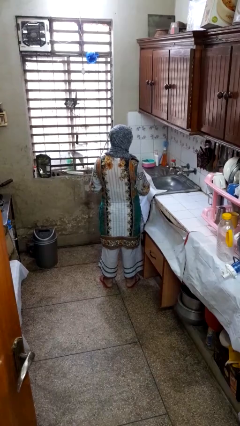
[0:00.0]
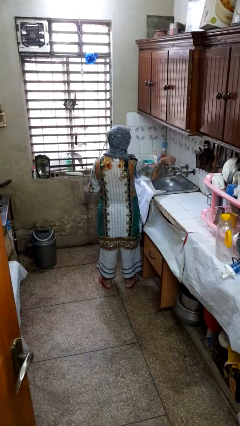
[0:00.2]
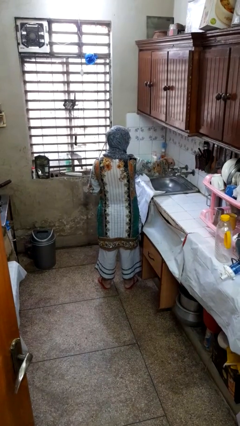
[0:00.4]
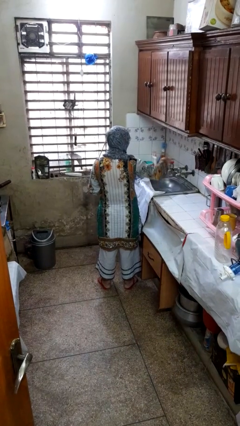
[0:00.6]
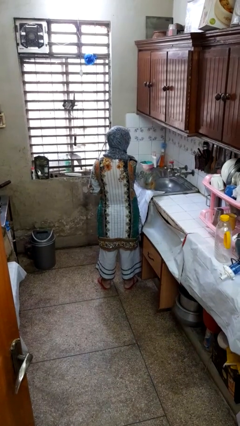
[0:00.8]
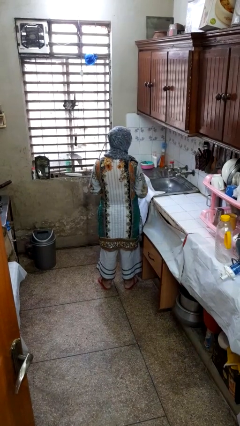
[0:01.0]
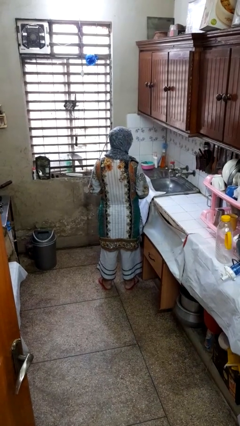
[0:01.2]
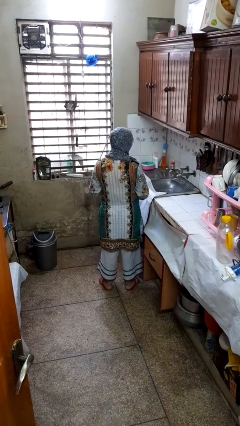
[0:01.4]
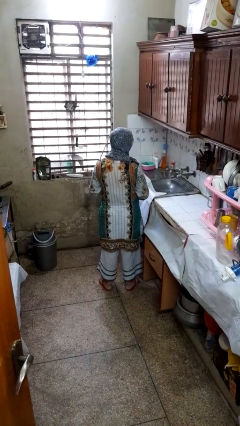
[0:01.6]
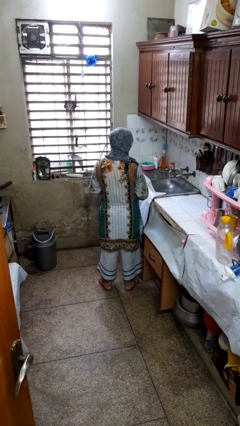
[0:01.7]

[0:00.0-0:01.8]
person turns on faucet

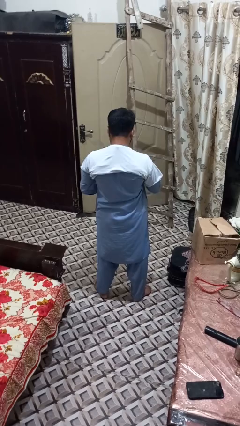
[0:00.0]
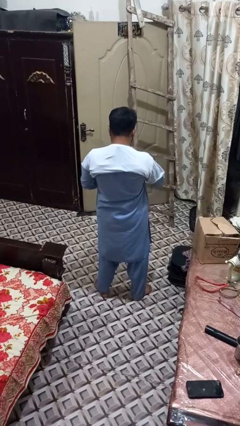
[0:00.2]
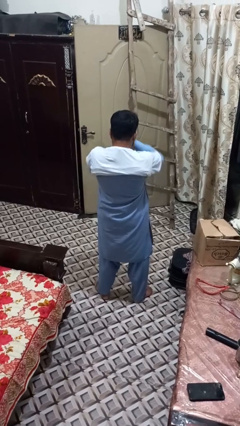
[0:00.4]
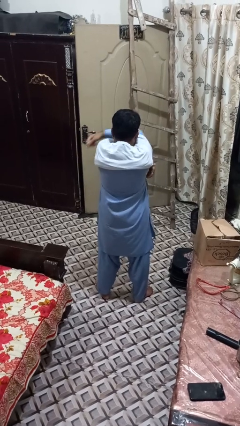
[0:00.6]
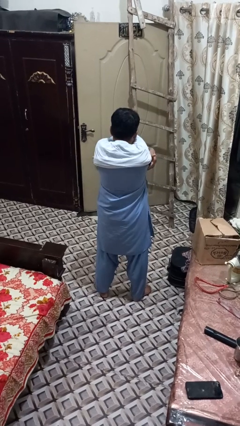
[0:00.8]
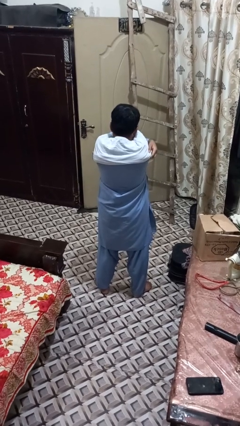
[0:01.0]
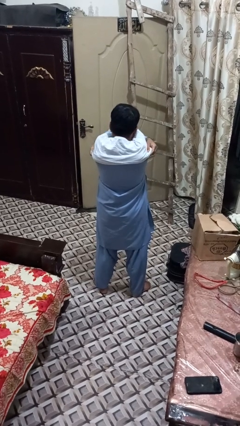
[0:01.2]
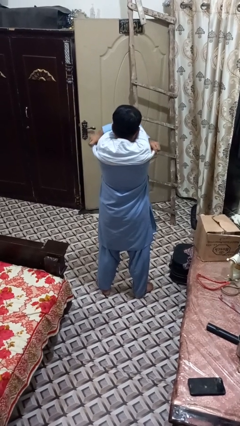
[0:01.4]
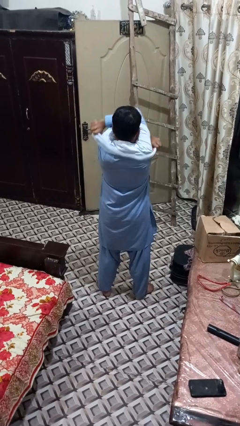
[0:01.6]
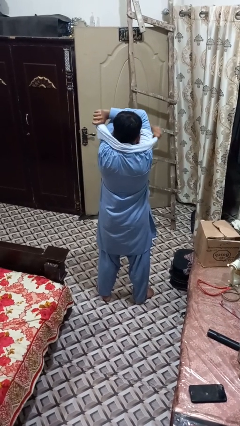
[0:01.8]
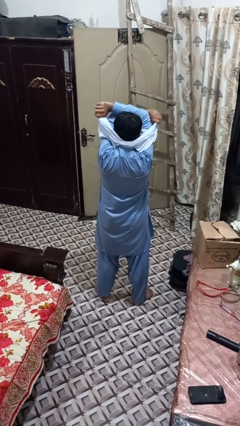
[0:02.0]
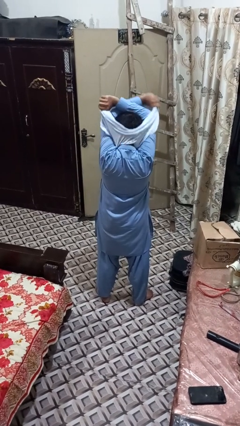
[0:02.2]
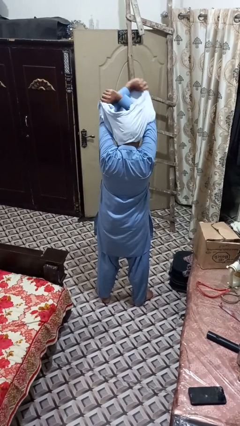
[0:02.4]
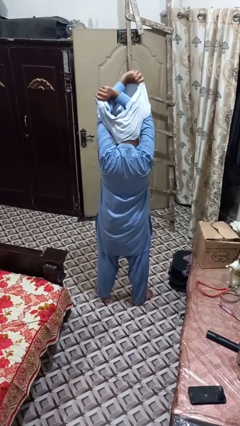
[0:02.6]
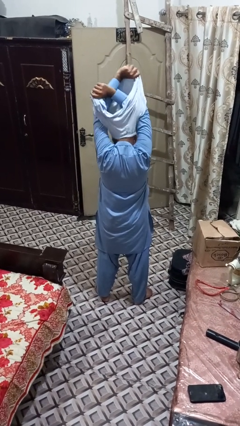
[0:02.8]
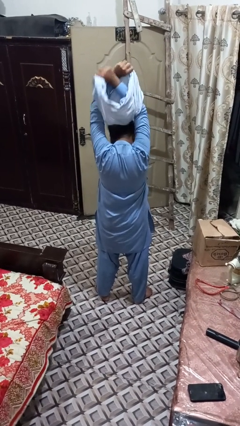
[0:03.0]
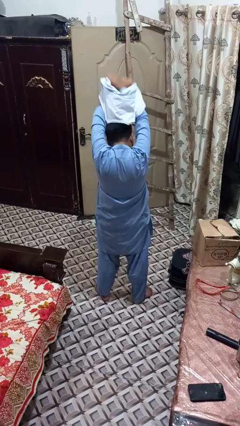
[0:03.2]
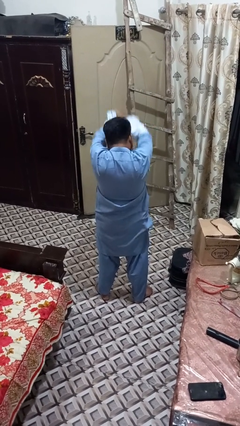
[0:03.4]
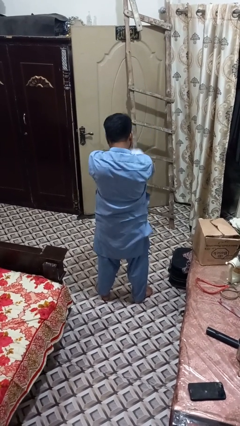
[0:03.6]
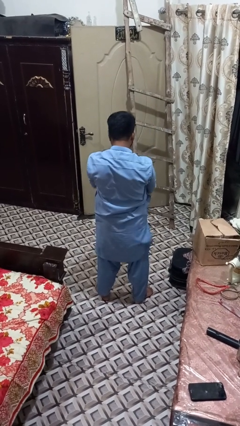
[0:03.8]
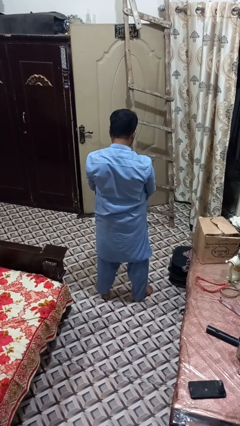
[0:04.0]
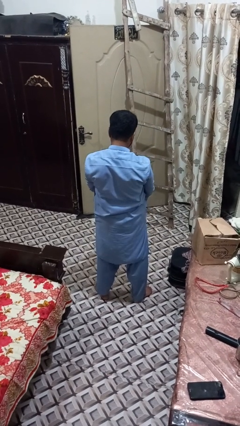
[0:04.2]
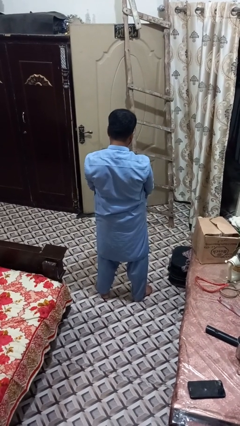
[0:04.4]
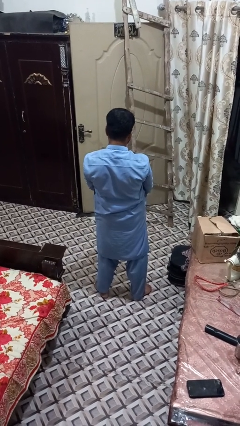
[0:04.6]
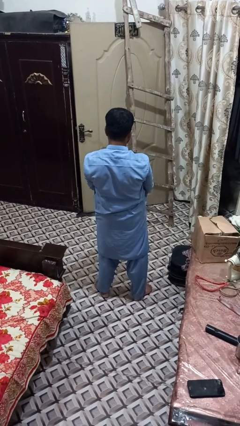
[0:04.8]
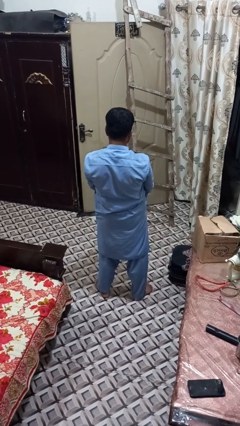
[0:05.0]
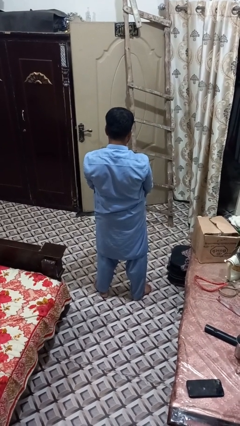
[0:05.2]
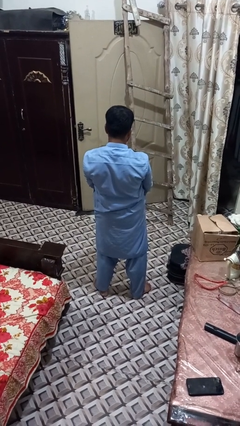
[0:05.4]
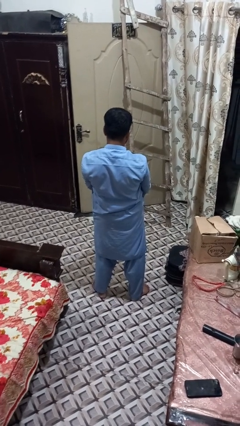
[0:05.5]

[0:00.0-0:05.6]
person takes off shirt

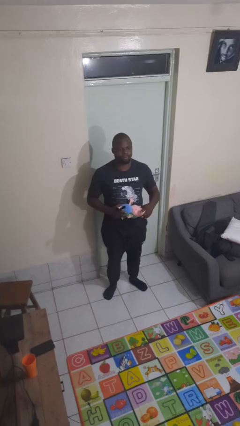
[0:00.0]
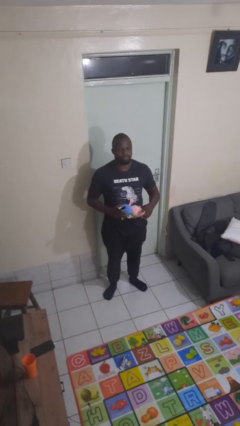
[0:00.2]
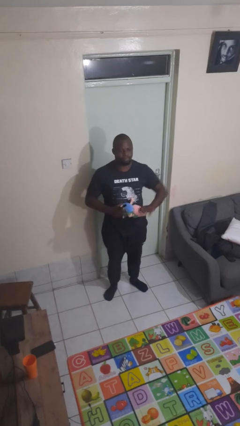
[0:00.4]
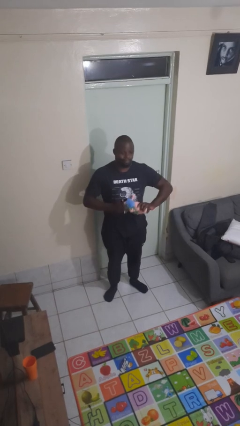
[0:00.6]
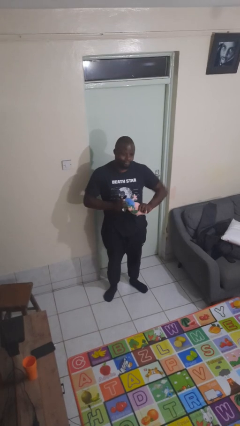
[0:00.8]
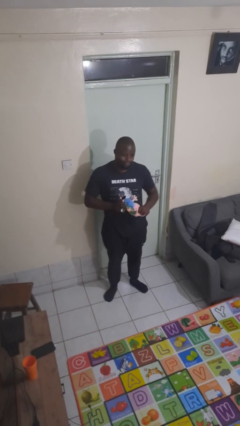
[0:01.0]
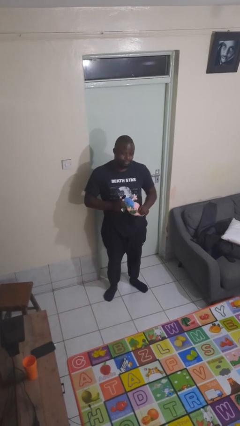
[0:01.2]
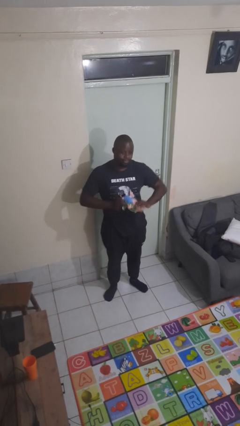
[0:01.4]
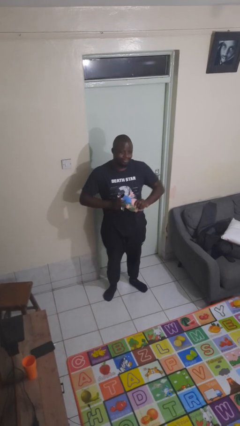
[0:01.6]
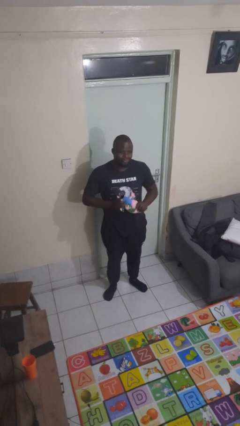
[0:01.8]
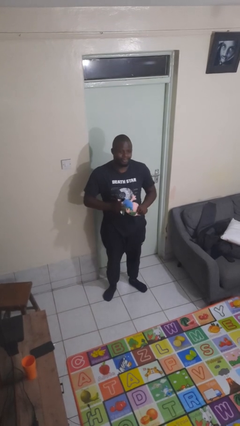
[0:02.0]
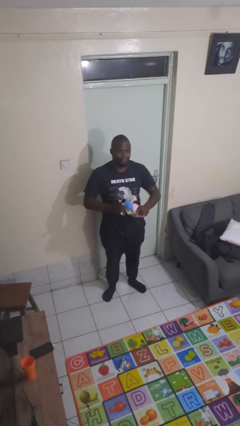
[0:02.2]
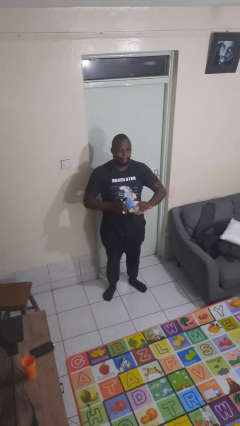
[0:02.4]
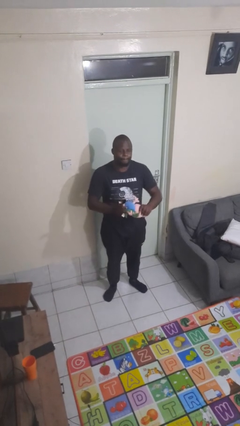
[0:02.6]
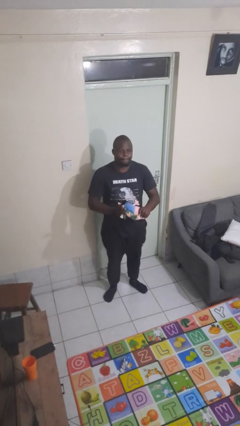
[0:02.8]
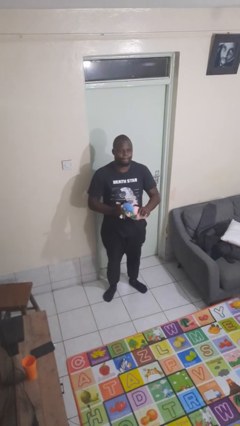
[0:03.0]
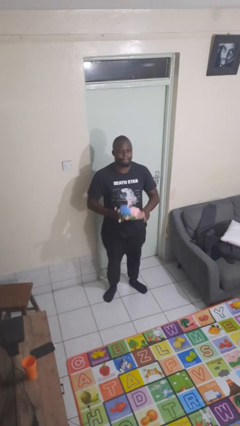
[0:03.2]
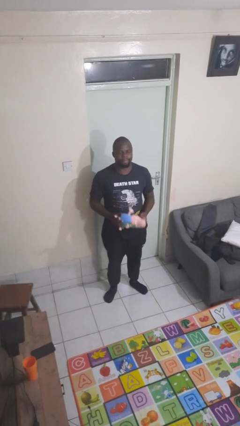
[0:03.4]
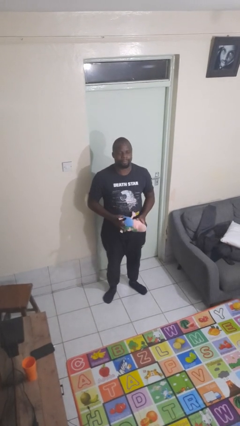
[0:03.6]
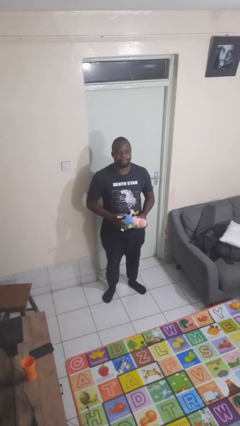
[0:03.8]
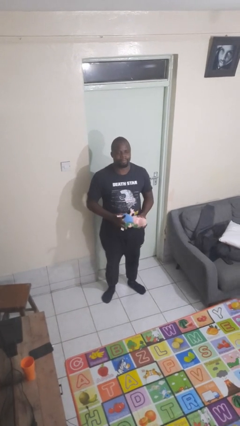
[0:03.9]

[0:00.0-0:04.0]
person squeezes object

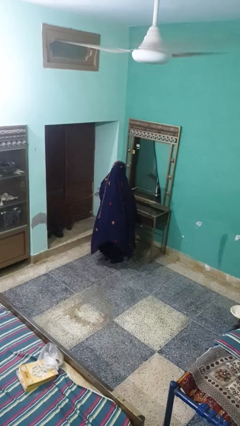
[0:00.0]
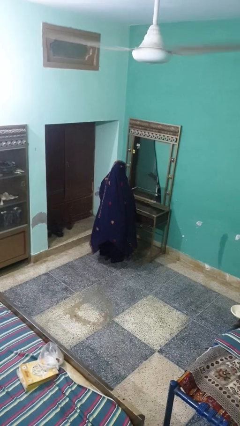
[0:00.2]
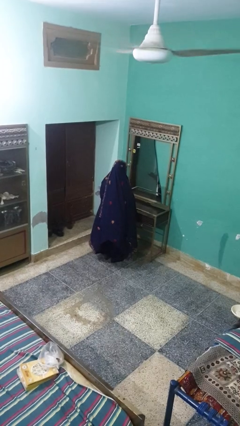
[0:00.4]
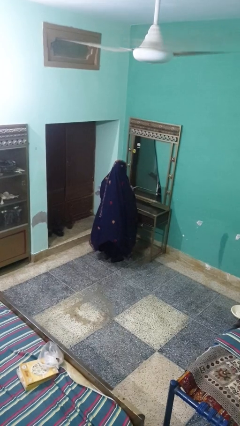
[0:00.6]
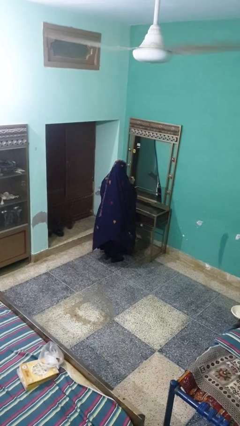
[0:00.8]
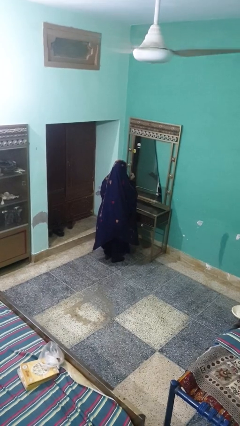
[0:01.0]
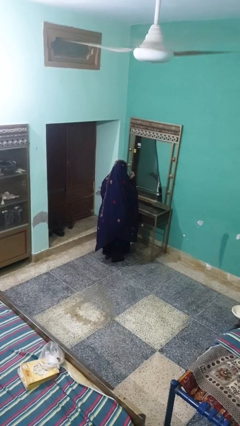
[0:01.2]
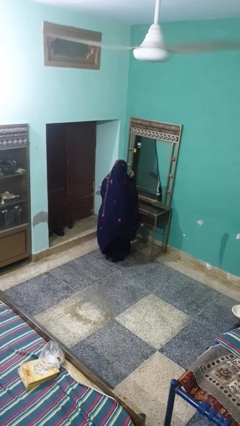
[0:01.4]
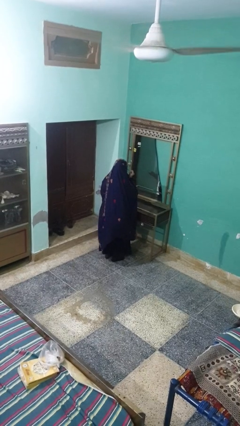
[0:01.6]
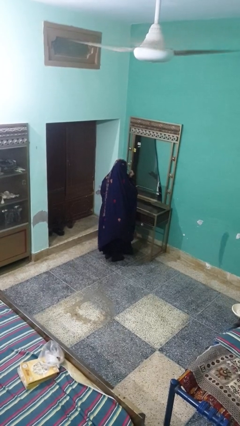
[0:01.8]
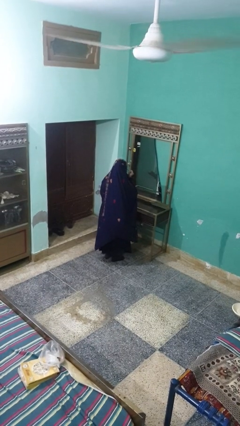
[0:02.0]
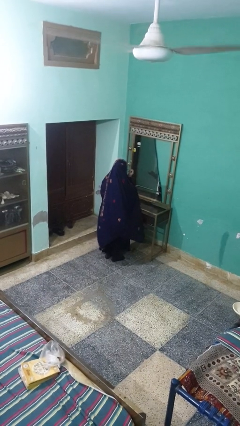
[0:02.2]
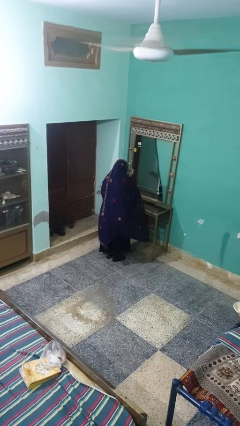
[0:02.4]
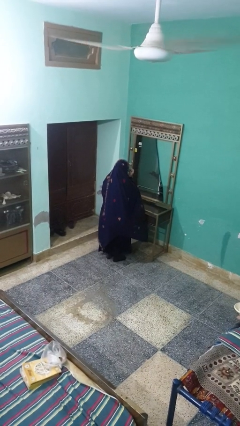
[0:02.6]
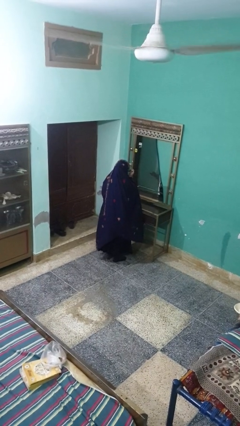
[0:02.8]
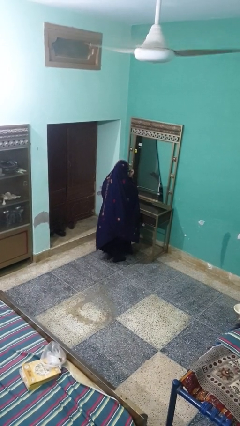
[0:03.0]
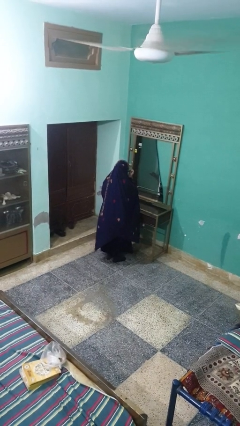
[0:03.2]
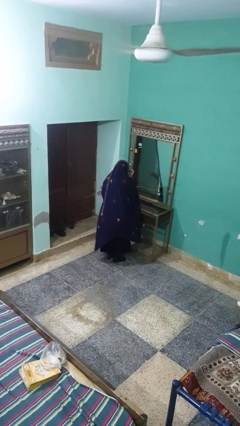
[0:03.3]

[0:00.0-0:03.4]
person applies eye makeup

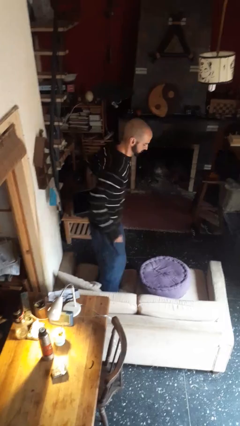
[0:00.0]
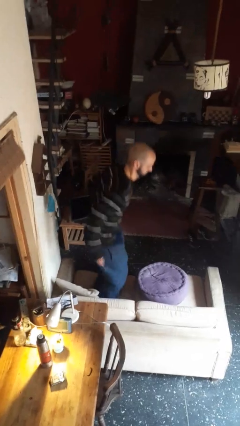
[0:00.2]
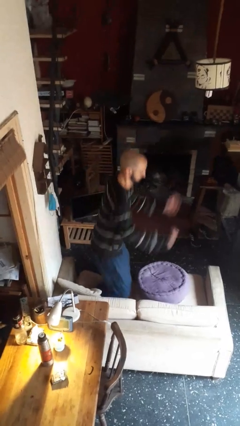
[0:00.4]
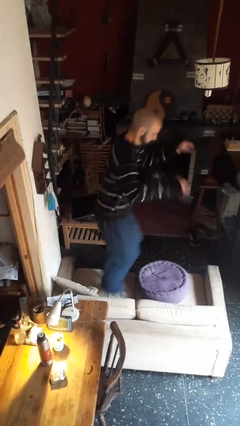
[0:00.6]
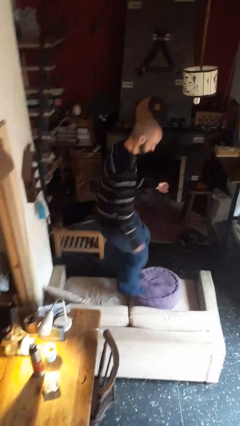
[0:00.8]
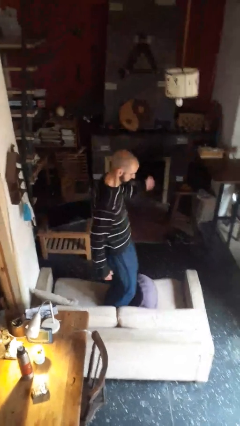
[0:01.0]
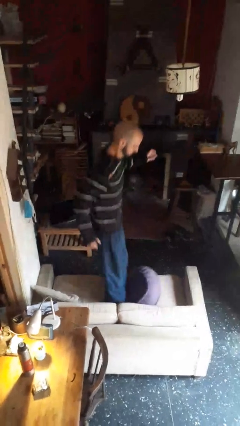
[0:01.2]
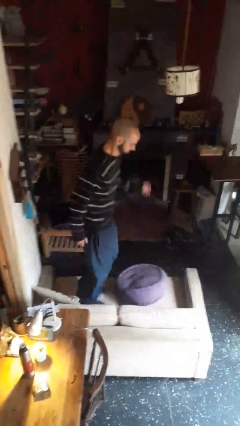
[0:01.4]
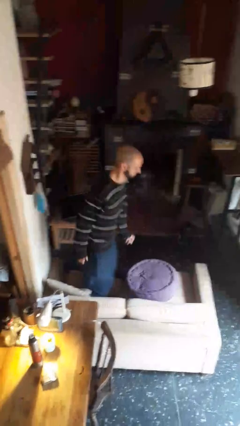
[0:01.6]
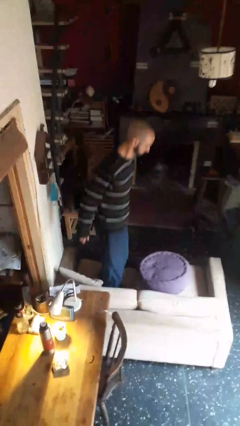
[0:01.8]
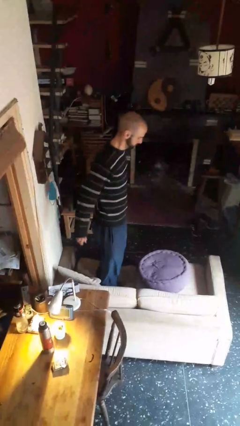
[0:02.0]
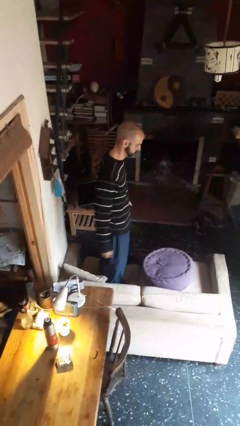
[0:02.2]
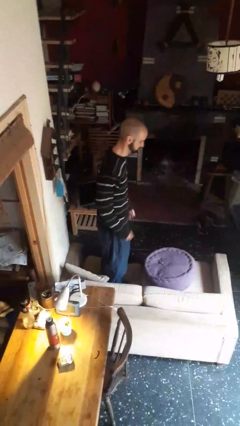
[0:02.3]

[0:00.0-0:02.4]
person jumps on couch

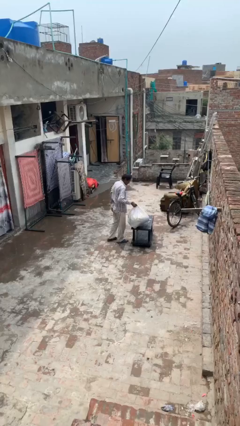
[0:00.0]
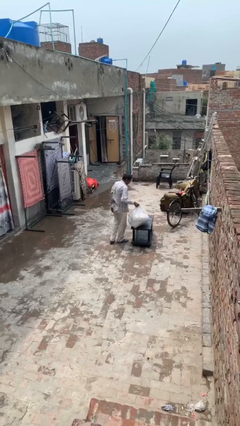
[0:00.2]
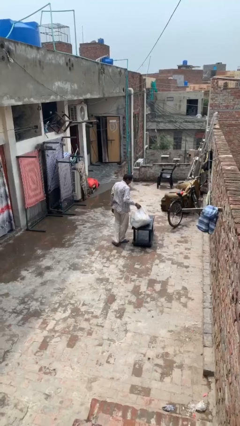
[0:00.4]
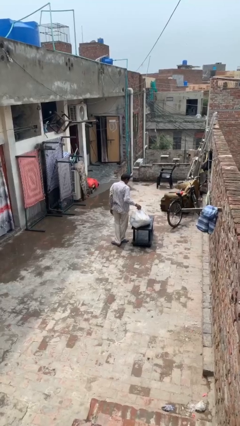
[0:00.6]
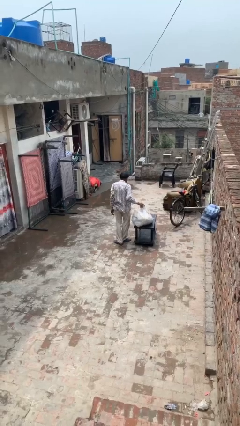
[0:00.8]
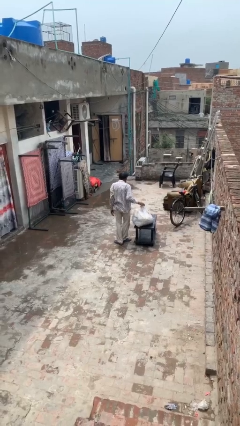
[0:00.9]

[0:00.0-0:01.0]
person puts down object on table
